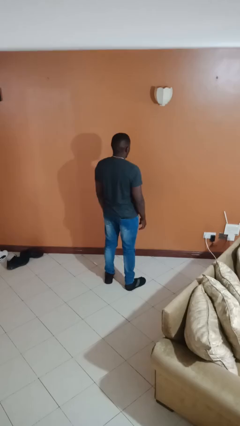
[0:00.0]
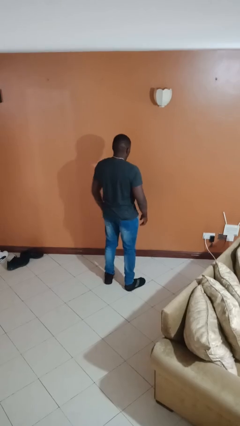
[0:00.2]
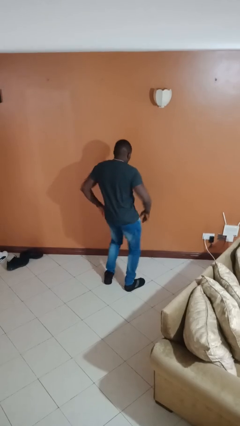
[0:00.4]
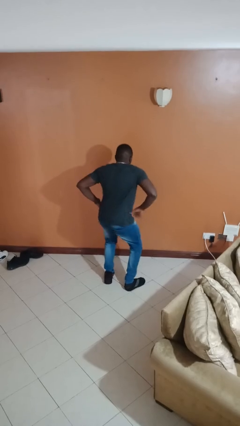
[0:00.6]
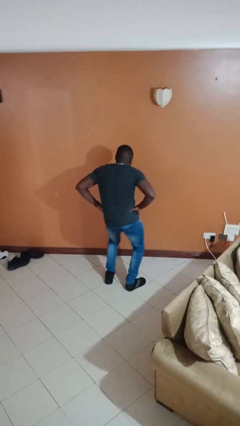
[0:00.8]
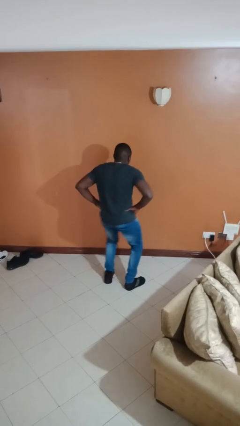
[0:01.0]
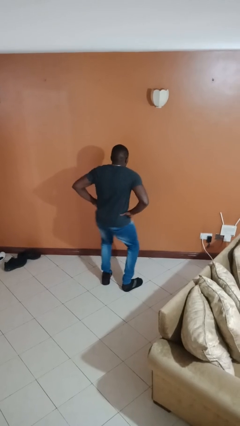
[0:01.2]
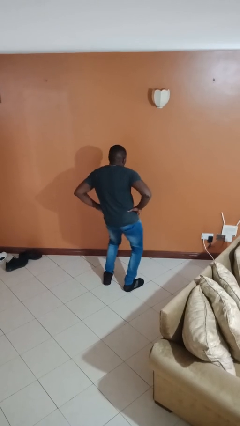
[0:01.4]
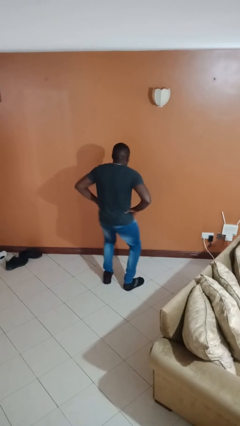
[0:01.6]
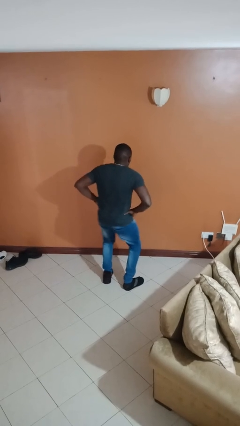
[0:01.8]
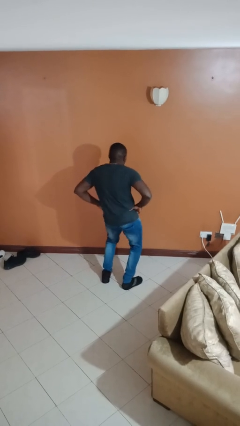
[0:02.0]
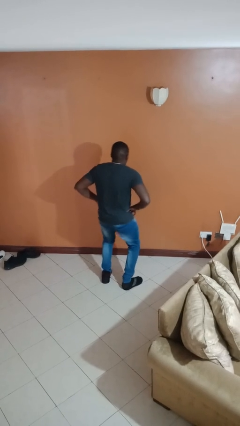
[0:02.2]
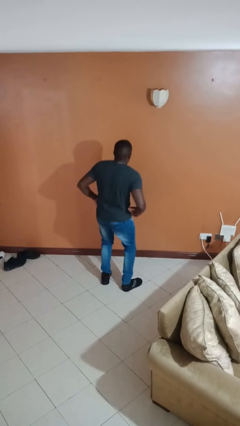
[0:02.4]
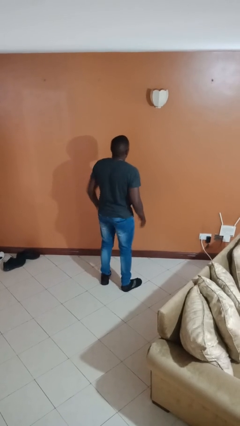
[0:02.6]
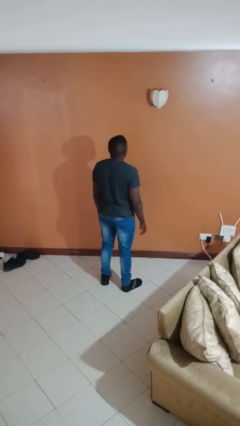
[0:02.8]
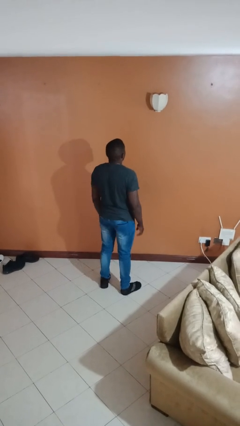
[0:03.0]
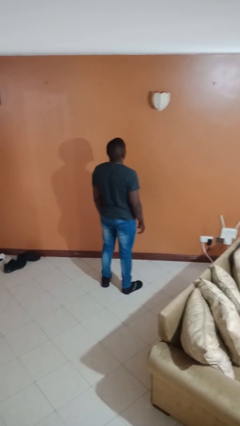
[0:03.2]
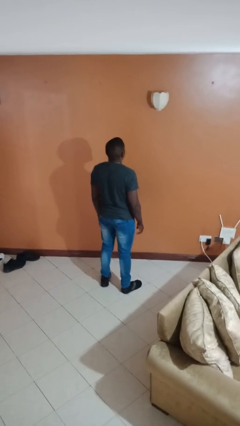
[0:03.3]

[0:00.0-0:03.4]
person wiggles hips

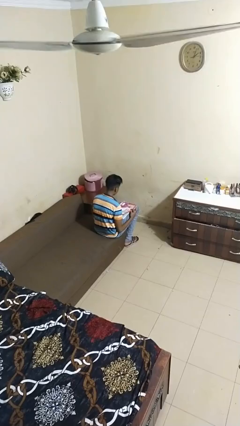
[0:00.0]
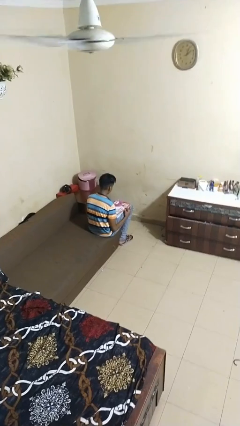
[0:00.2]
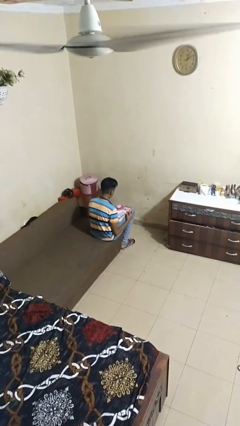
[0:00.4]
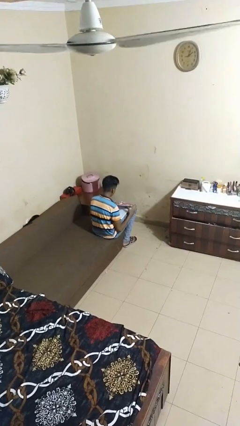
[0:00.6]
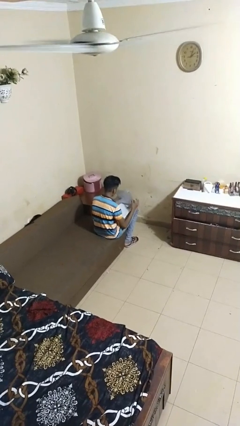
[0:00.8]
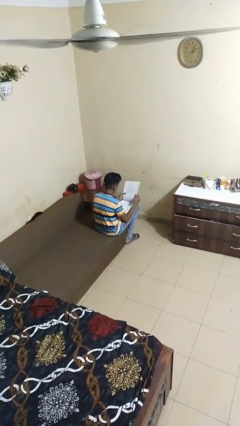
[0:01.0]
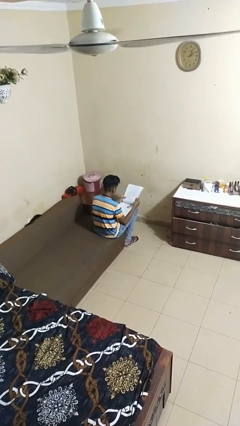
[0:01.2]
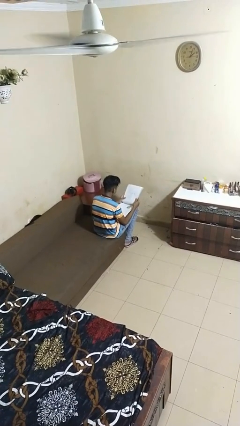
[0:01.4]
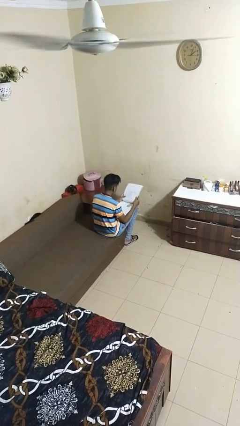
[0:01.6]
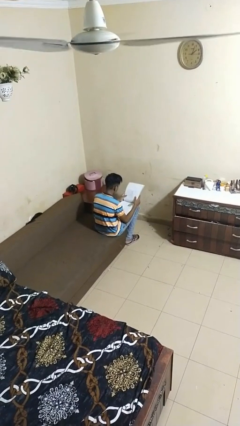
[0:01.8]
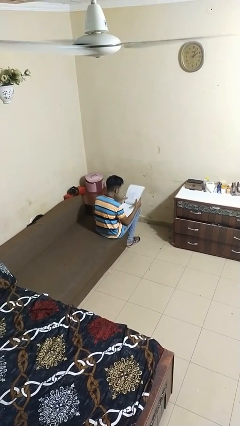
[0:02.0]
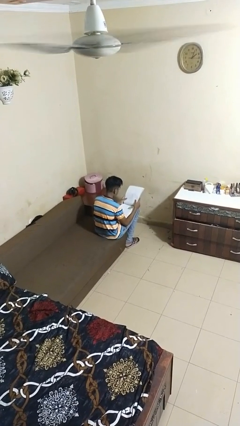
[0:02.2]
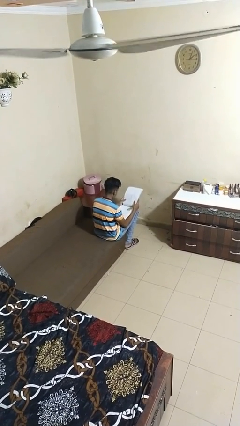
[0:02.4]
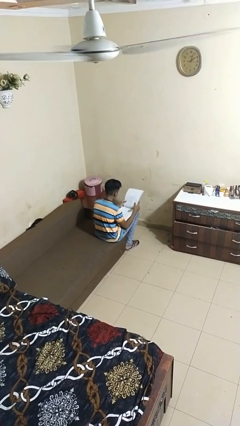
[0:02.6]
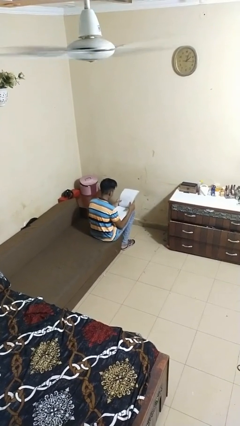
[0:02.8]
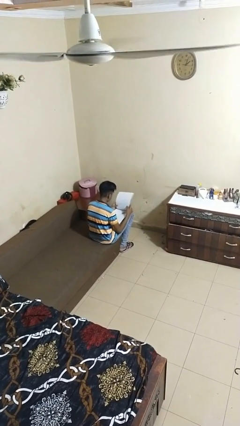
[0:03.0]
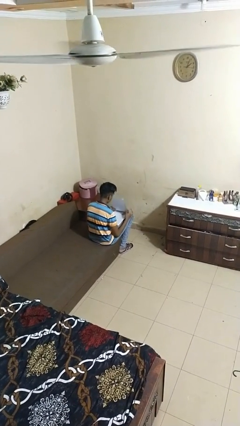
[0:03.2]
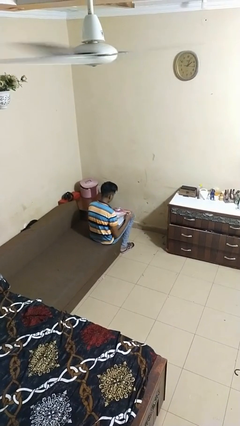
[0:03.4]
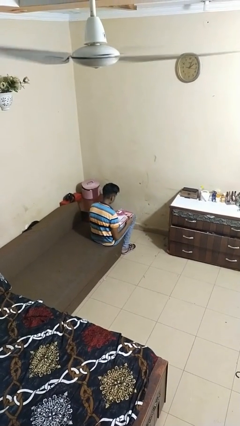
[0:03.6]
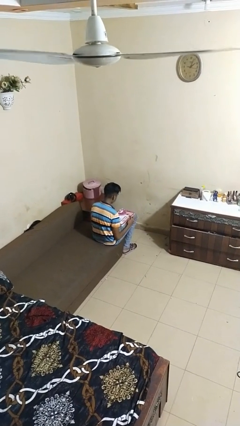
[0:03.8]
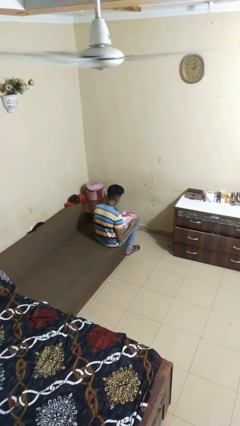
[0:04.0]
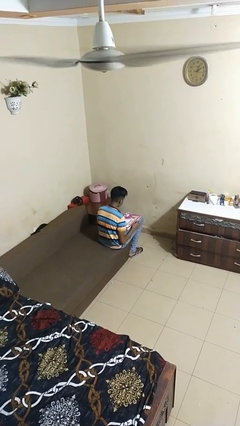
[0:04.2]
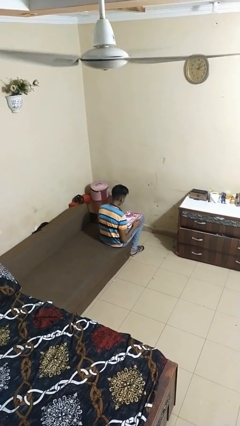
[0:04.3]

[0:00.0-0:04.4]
person reads magazine

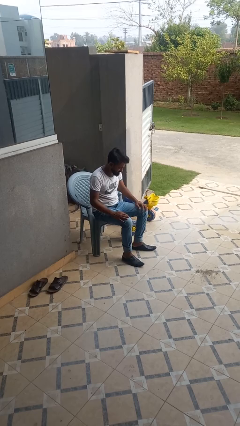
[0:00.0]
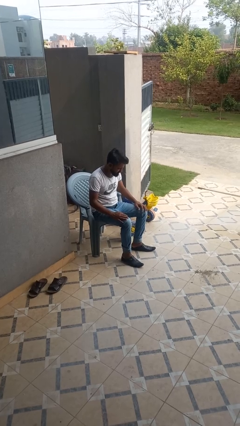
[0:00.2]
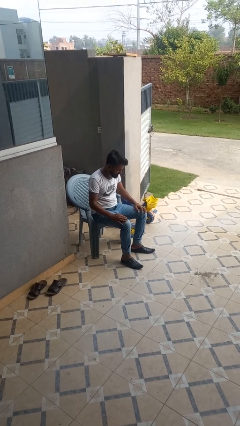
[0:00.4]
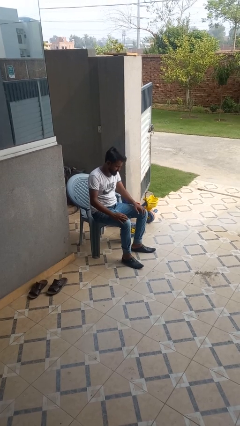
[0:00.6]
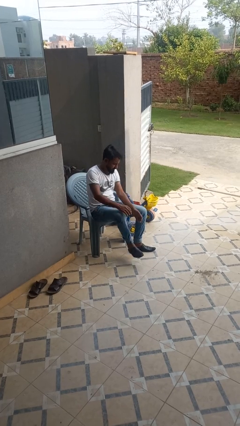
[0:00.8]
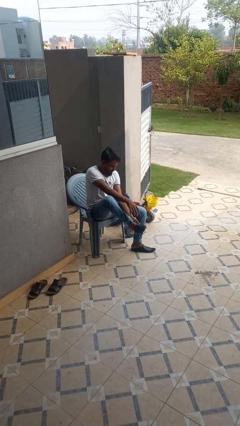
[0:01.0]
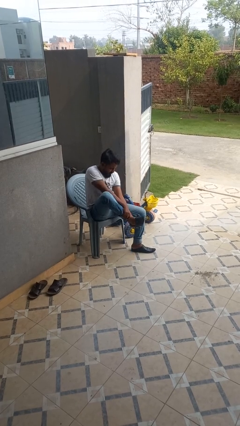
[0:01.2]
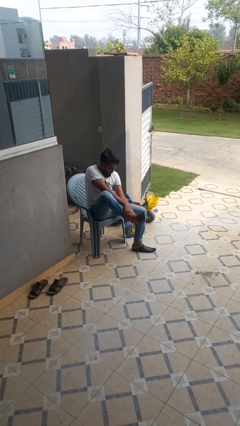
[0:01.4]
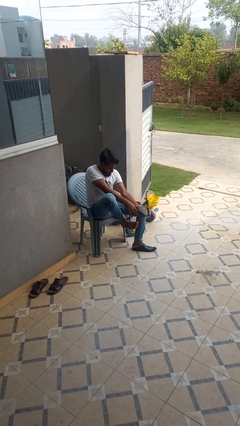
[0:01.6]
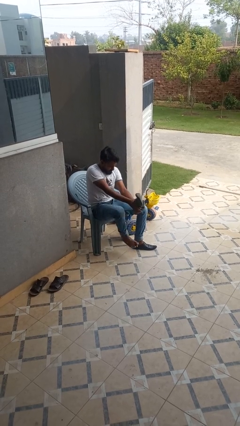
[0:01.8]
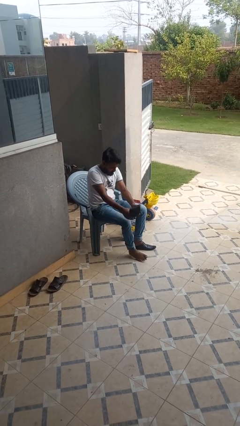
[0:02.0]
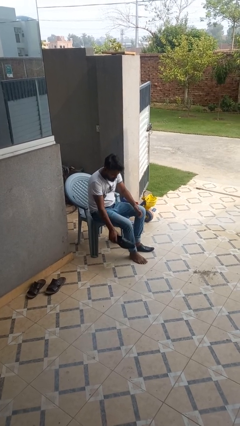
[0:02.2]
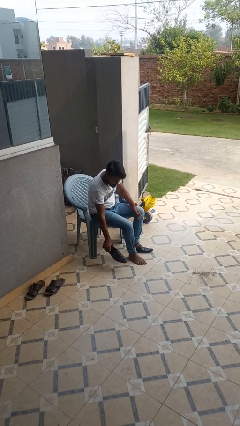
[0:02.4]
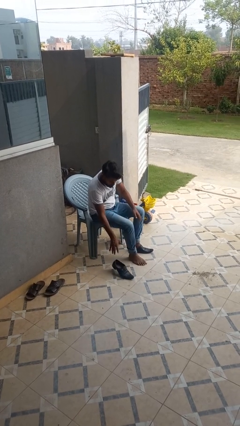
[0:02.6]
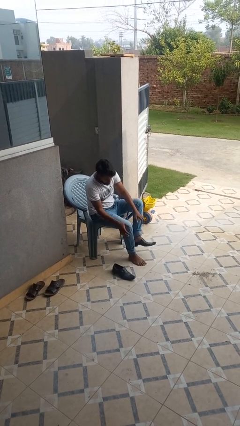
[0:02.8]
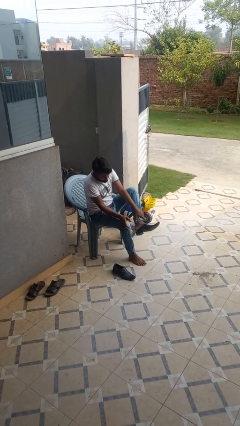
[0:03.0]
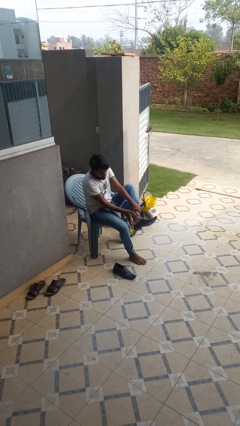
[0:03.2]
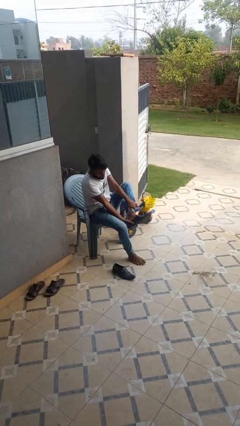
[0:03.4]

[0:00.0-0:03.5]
person takes off shoes

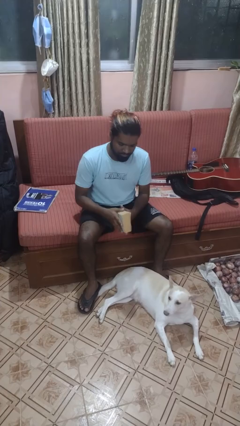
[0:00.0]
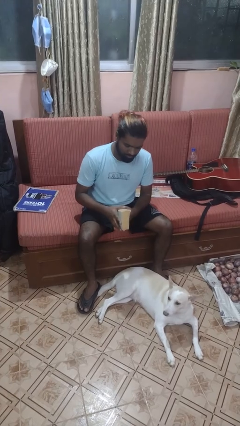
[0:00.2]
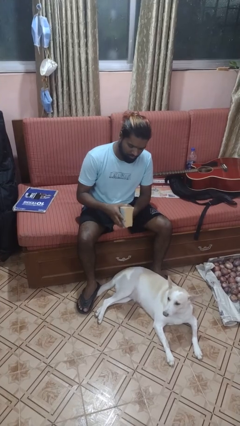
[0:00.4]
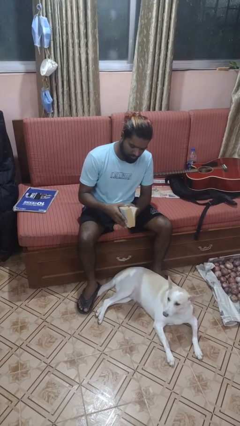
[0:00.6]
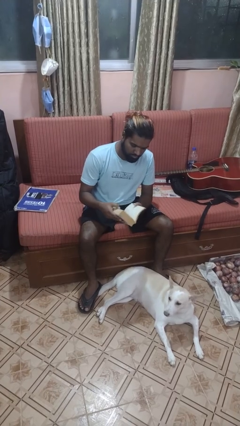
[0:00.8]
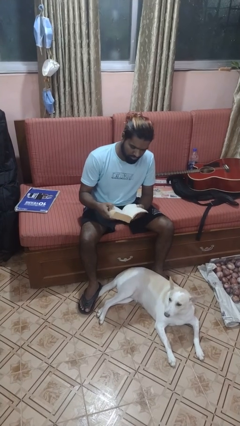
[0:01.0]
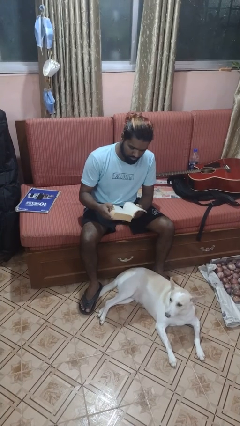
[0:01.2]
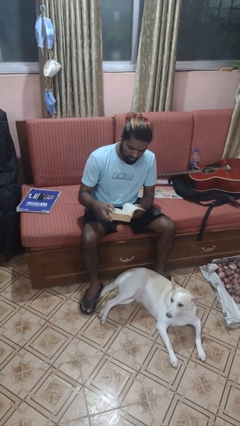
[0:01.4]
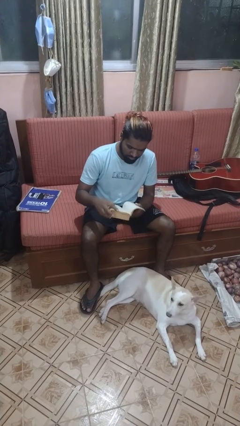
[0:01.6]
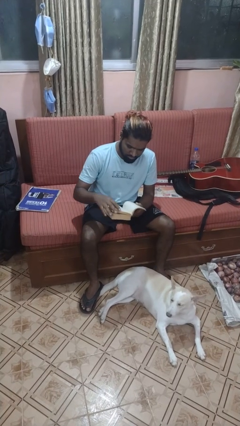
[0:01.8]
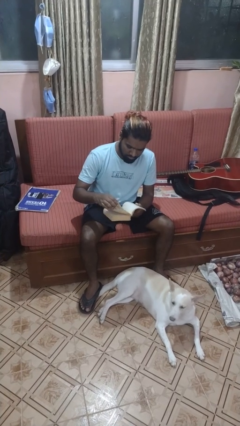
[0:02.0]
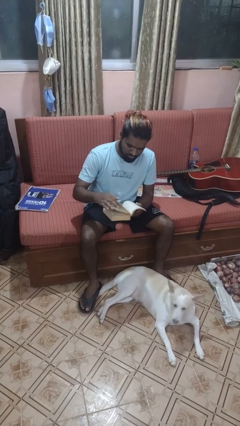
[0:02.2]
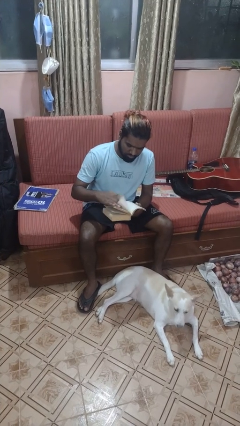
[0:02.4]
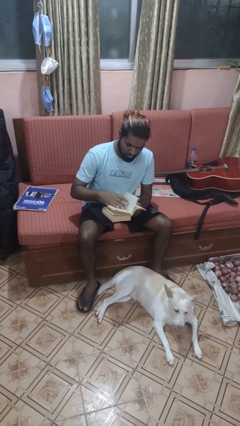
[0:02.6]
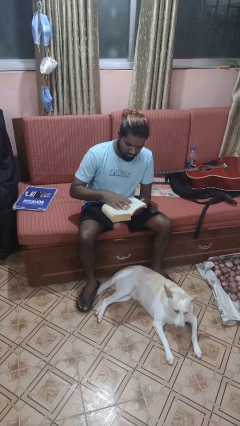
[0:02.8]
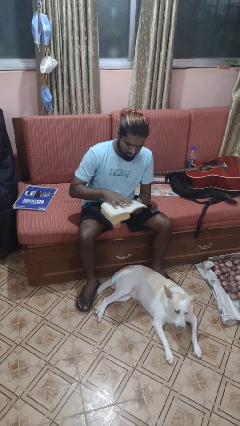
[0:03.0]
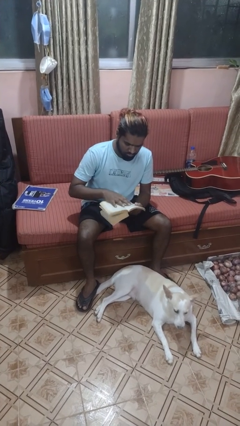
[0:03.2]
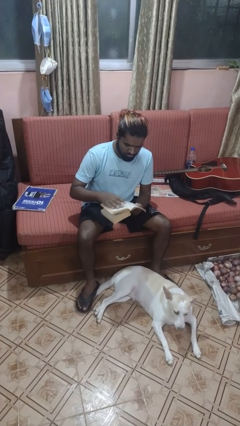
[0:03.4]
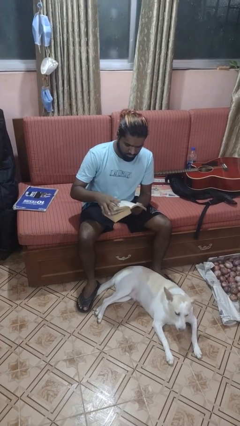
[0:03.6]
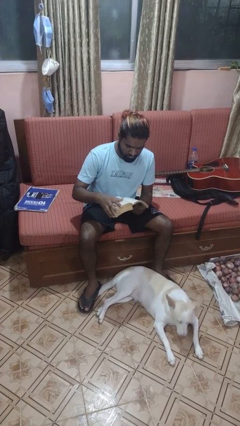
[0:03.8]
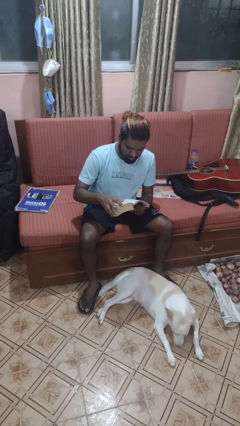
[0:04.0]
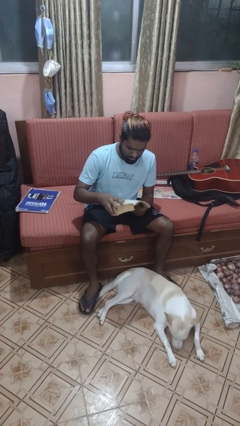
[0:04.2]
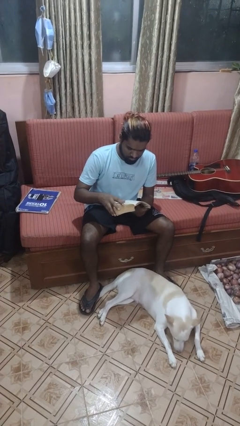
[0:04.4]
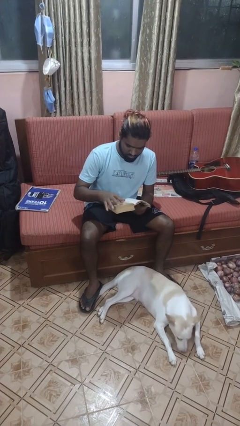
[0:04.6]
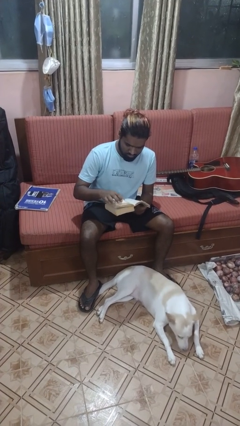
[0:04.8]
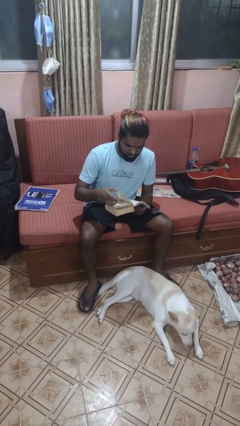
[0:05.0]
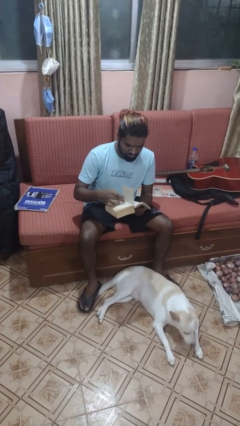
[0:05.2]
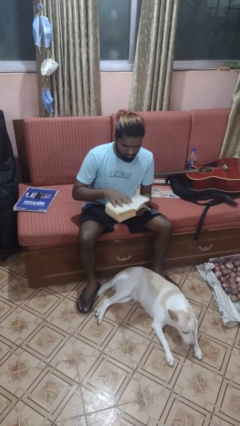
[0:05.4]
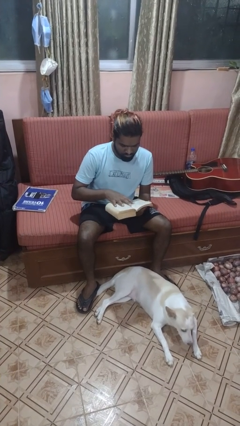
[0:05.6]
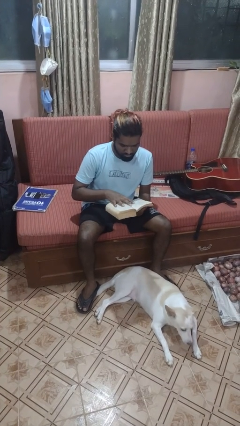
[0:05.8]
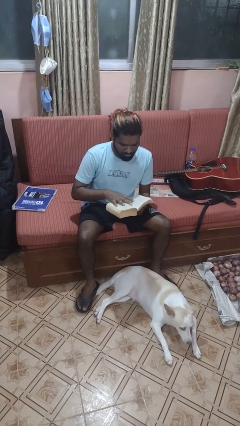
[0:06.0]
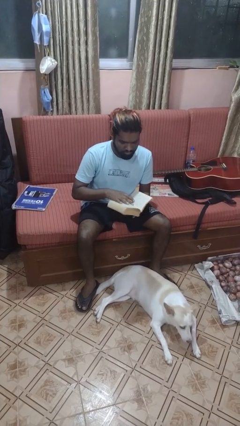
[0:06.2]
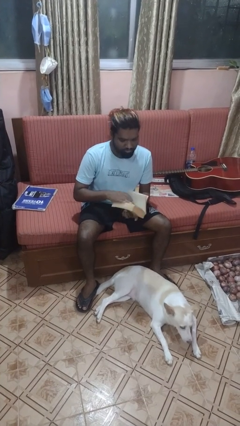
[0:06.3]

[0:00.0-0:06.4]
person reads book

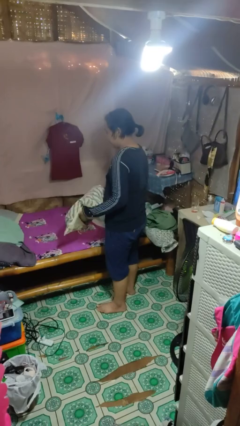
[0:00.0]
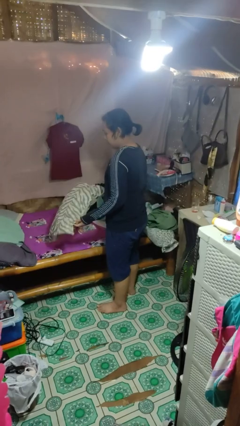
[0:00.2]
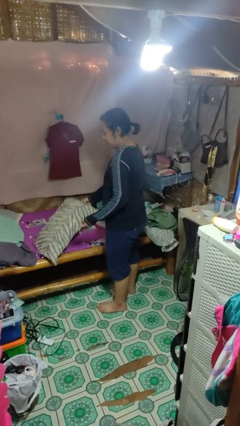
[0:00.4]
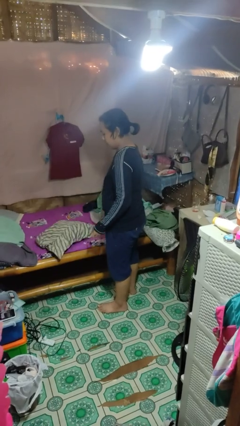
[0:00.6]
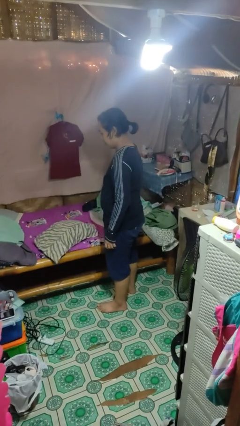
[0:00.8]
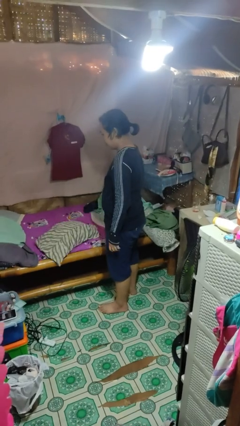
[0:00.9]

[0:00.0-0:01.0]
person puts down object on bed
